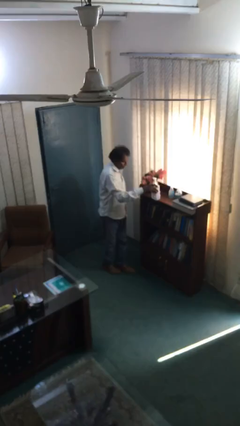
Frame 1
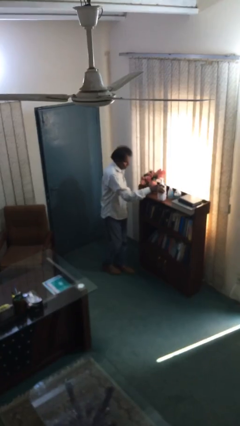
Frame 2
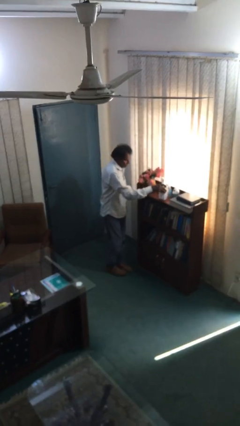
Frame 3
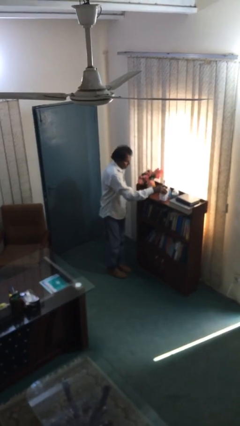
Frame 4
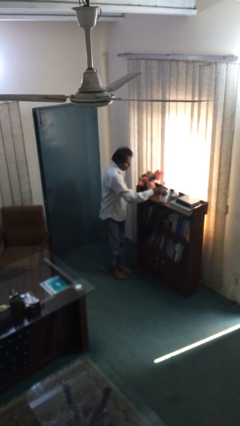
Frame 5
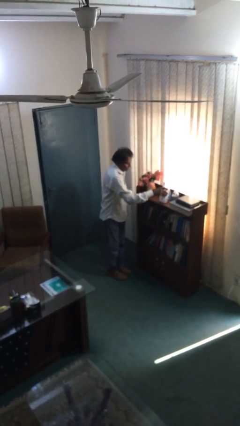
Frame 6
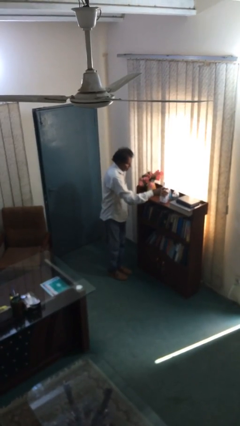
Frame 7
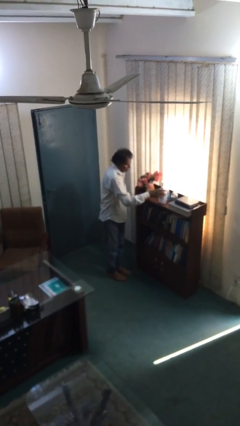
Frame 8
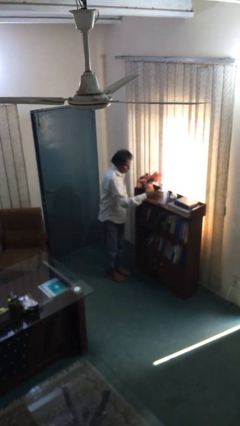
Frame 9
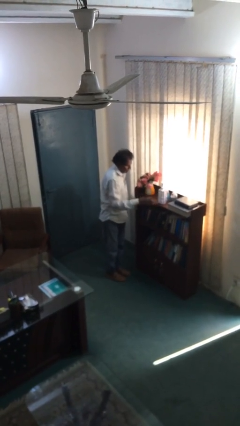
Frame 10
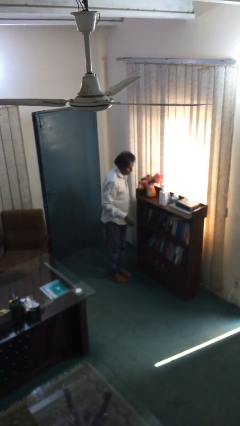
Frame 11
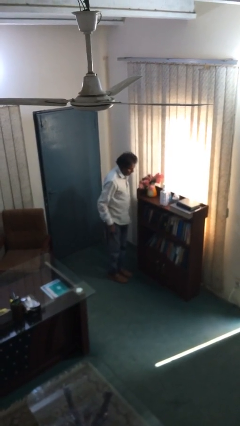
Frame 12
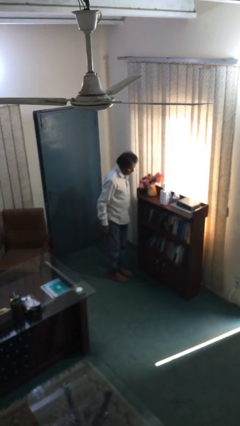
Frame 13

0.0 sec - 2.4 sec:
person puts down object on shelf

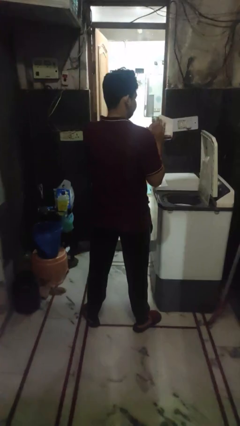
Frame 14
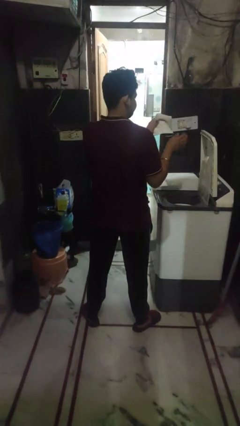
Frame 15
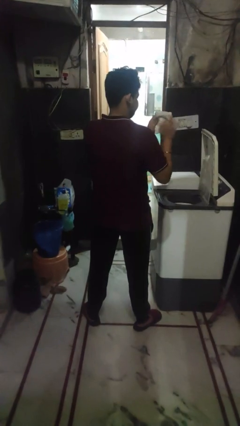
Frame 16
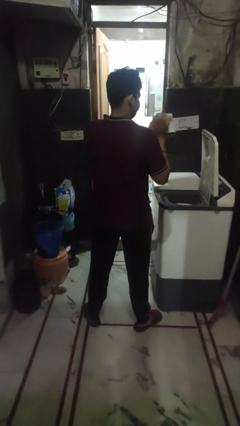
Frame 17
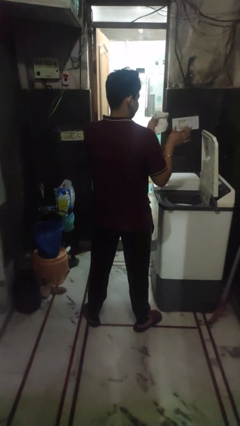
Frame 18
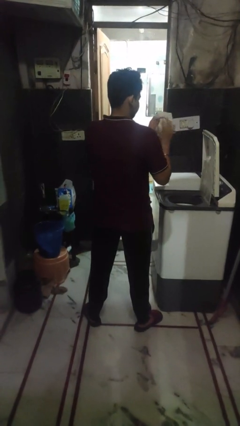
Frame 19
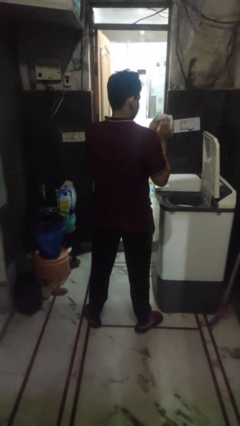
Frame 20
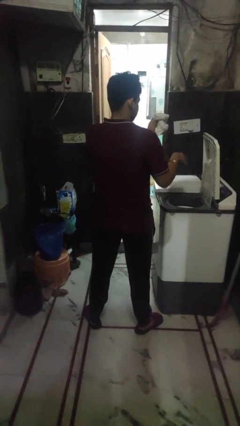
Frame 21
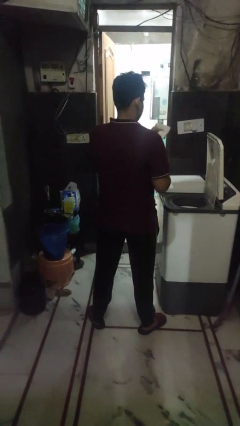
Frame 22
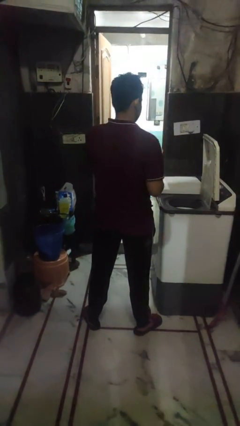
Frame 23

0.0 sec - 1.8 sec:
person cleans dryer lint trap

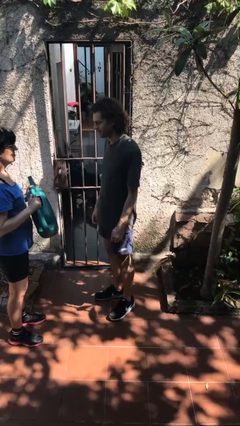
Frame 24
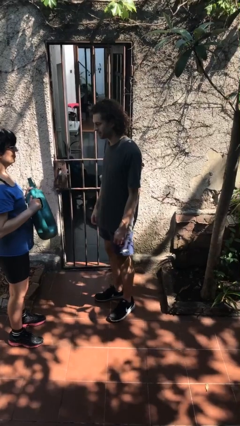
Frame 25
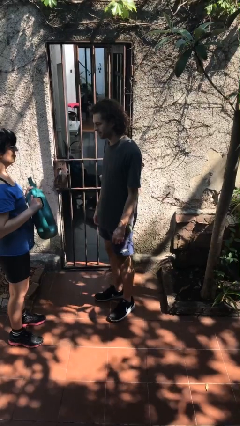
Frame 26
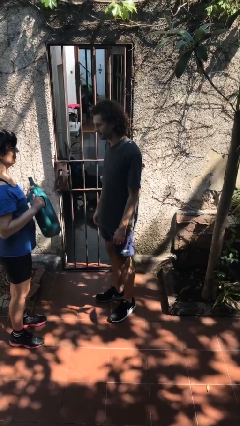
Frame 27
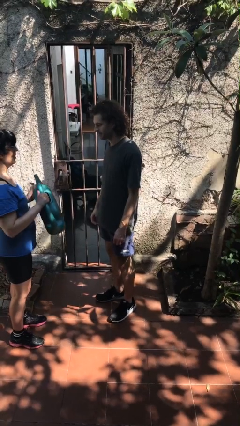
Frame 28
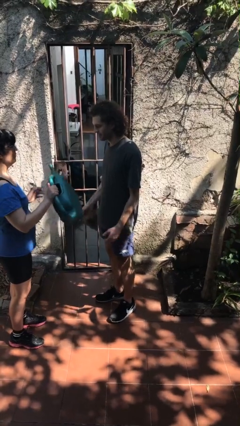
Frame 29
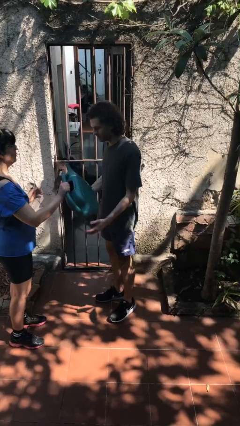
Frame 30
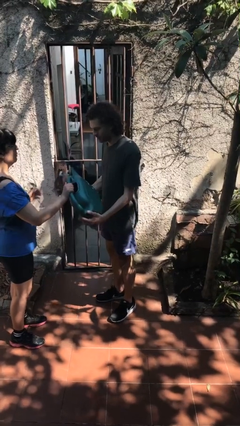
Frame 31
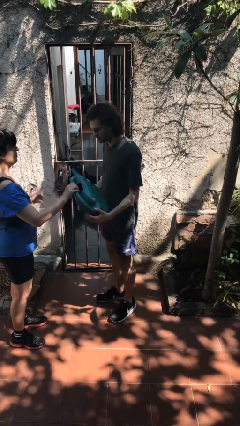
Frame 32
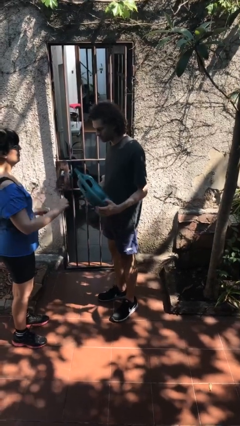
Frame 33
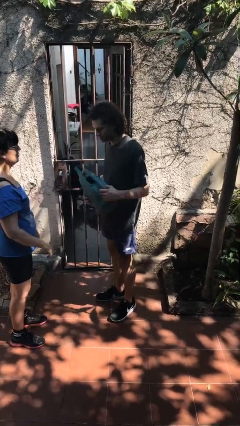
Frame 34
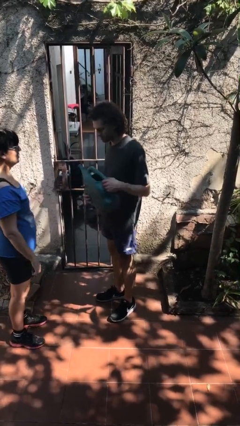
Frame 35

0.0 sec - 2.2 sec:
person transfers object to person

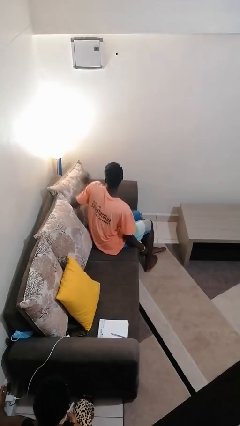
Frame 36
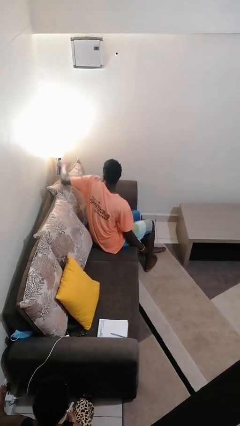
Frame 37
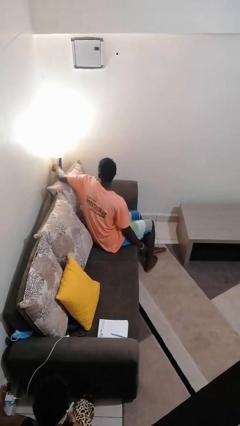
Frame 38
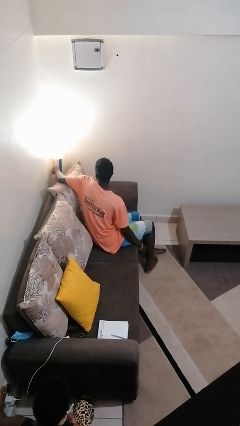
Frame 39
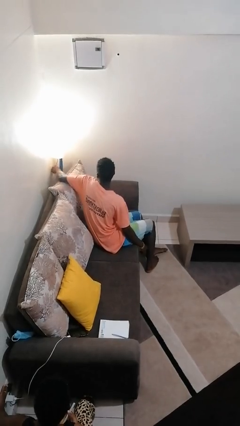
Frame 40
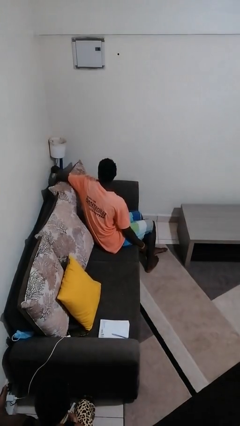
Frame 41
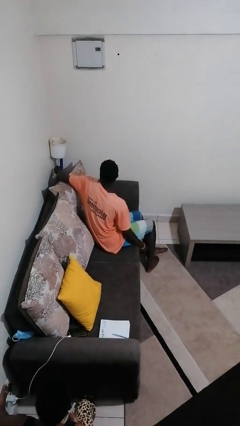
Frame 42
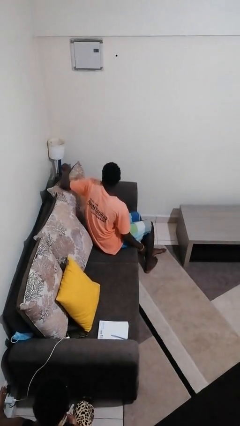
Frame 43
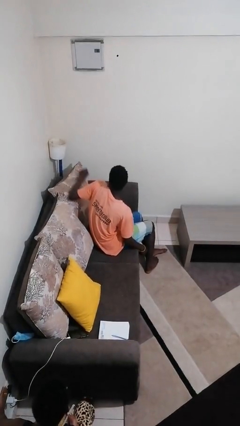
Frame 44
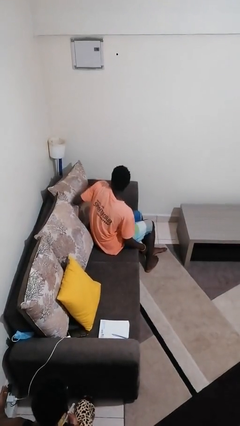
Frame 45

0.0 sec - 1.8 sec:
person turns off lamp

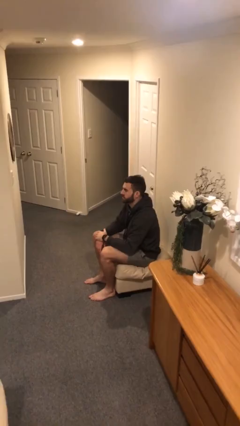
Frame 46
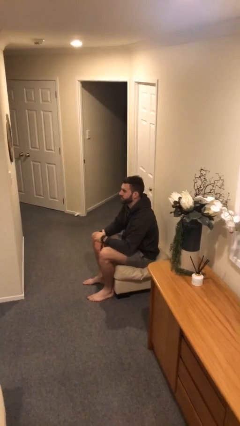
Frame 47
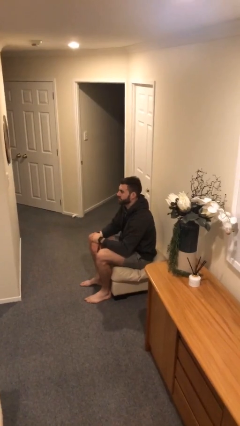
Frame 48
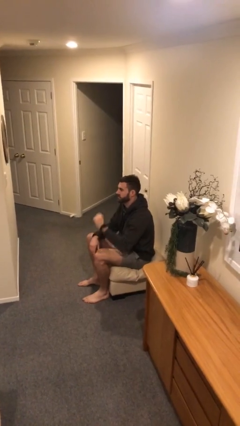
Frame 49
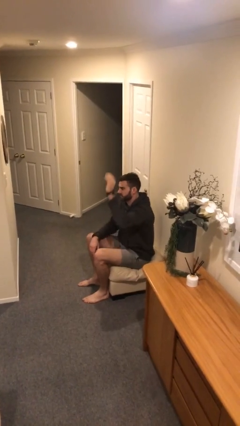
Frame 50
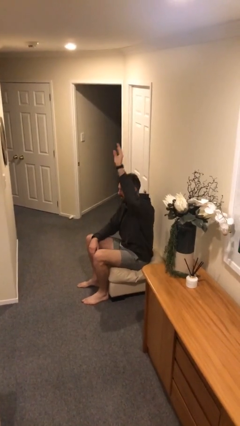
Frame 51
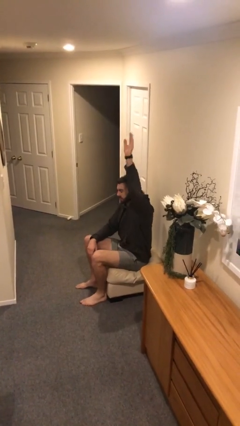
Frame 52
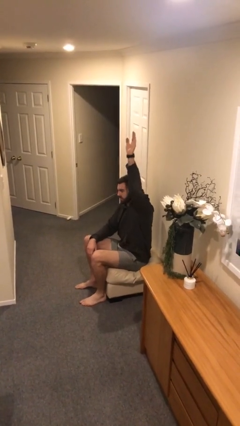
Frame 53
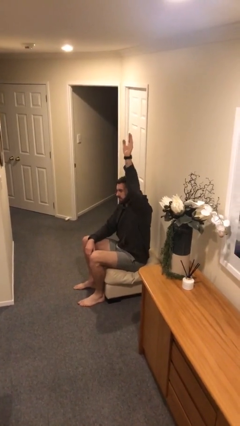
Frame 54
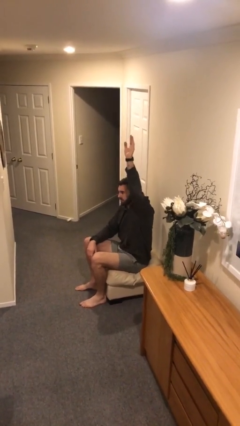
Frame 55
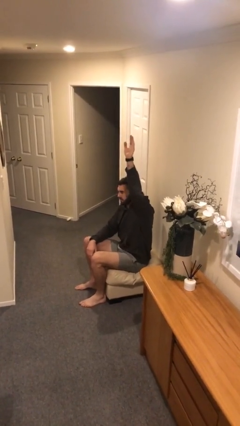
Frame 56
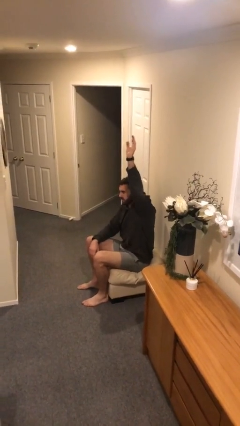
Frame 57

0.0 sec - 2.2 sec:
person gestures raise hand

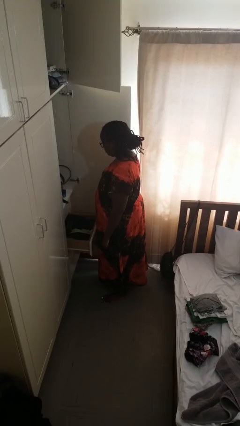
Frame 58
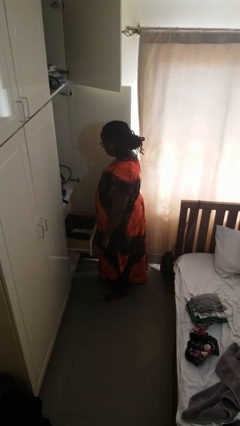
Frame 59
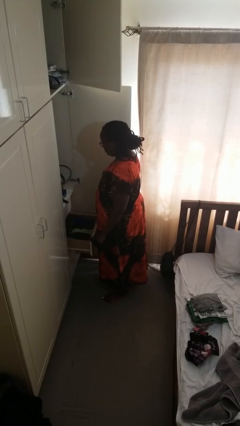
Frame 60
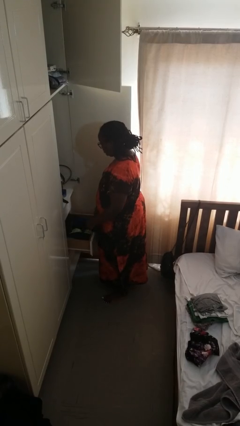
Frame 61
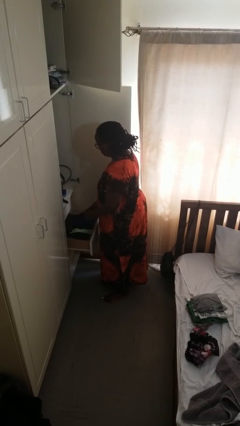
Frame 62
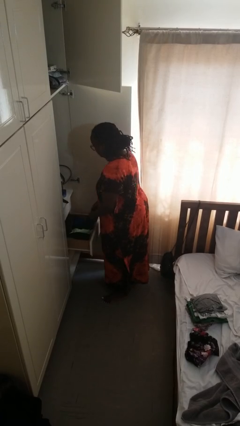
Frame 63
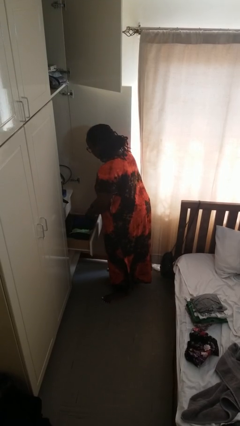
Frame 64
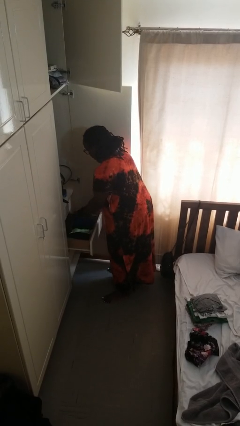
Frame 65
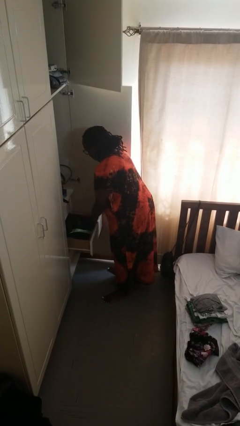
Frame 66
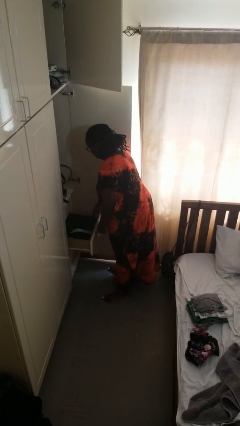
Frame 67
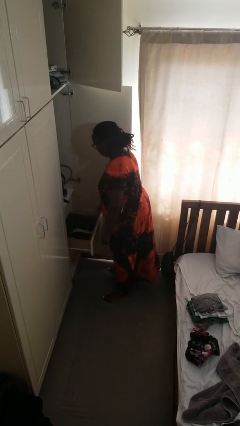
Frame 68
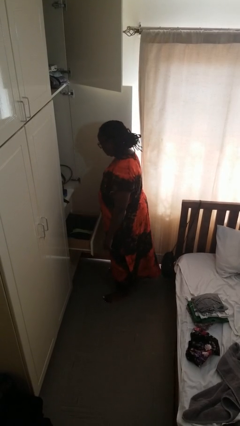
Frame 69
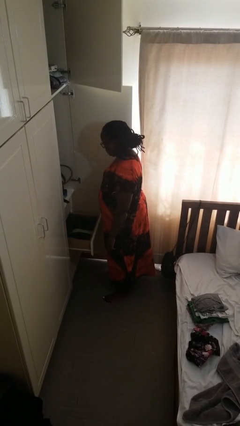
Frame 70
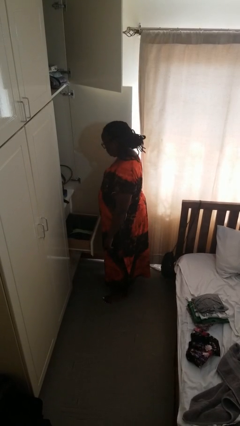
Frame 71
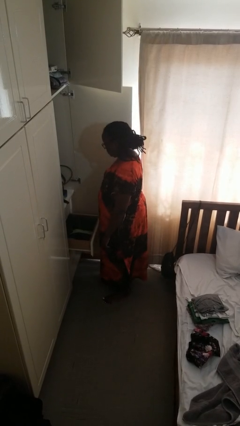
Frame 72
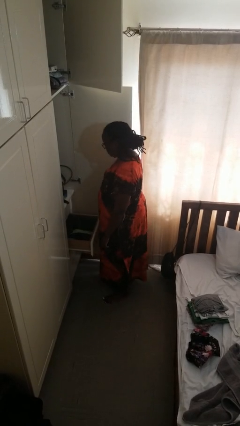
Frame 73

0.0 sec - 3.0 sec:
person puts clothes into dresser

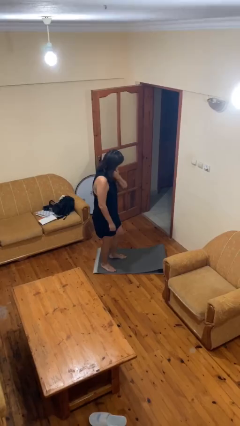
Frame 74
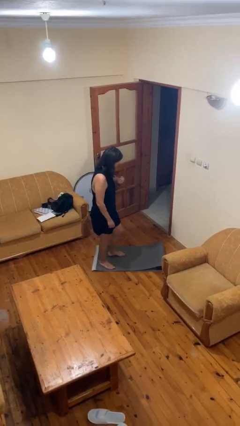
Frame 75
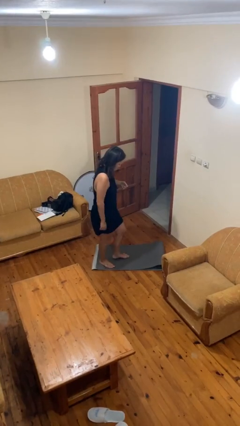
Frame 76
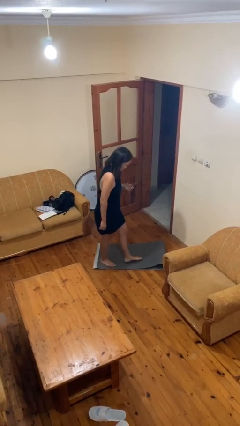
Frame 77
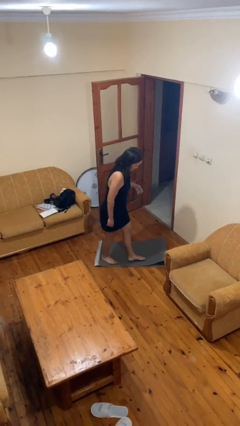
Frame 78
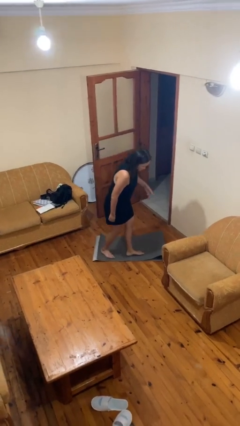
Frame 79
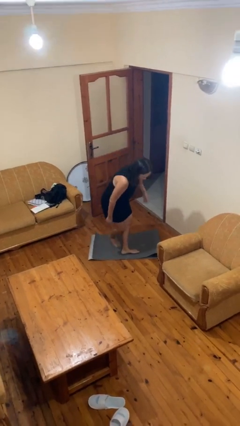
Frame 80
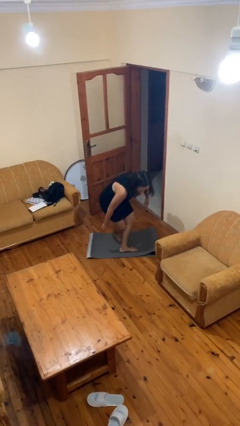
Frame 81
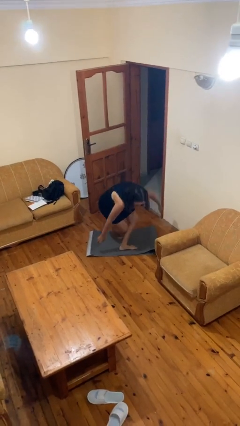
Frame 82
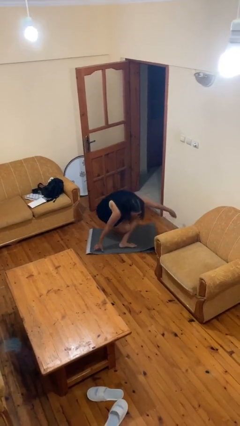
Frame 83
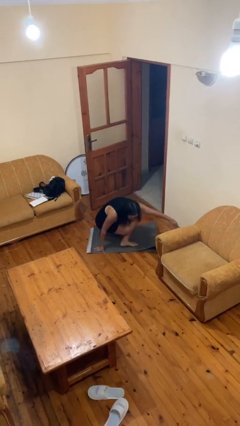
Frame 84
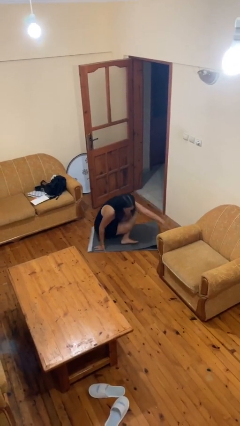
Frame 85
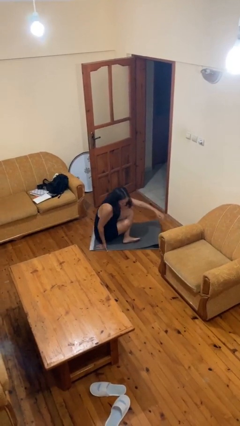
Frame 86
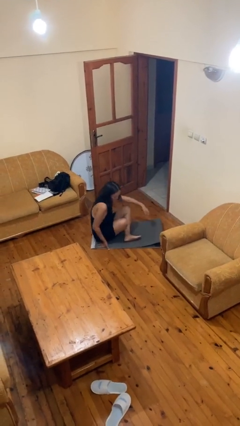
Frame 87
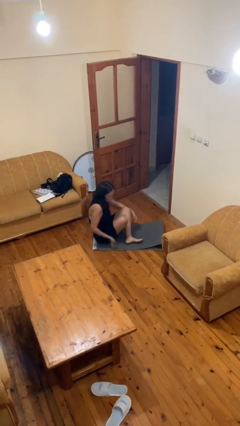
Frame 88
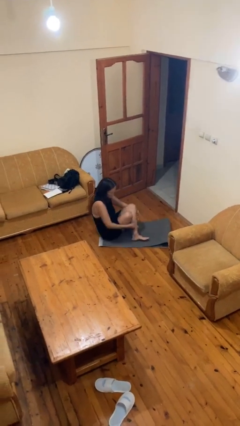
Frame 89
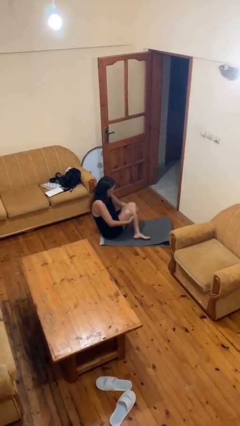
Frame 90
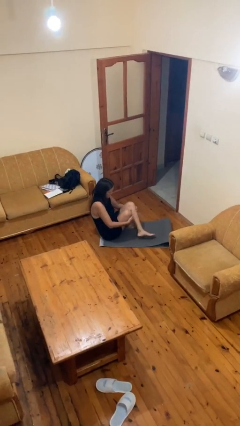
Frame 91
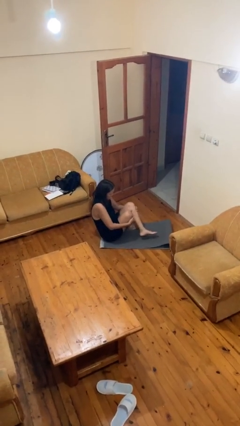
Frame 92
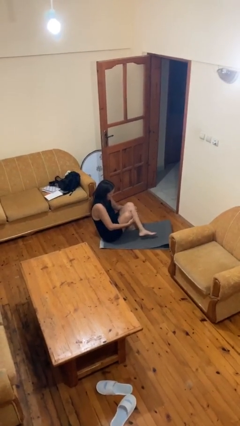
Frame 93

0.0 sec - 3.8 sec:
person sits crisscross
